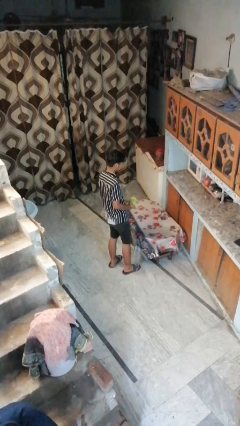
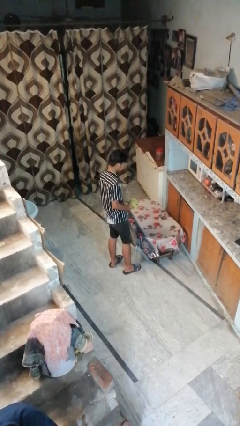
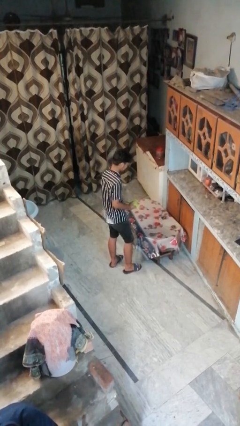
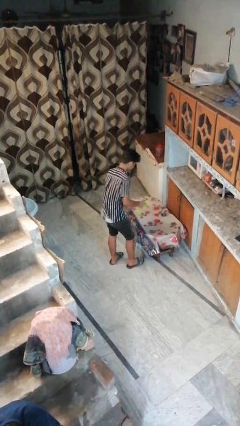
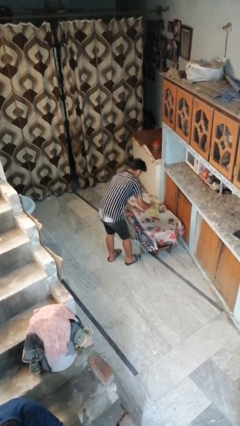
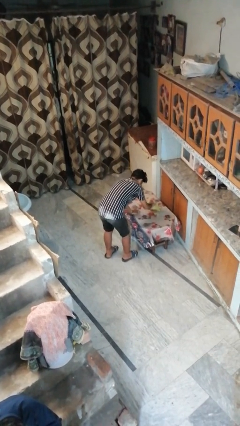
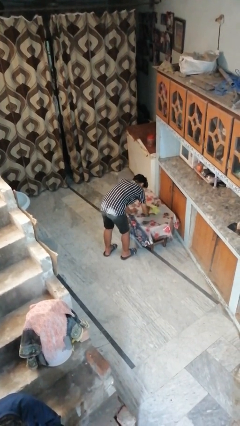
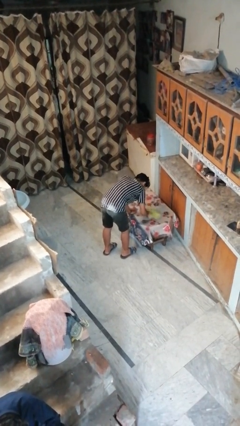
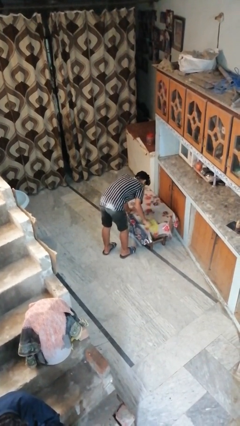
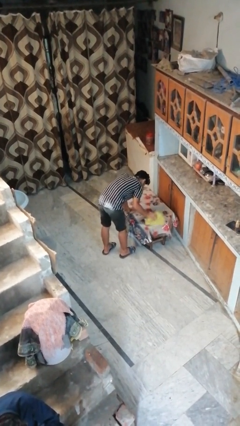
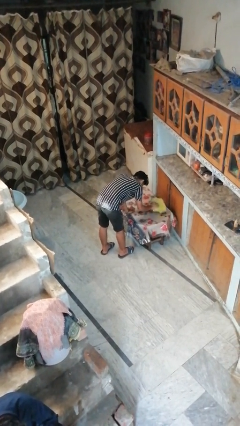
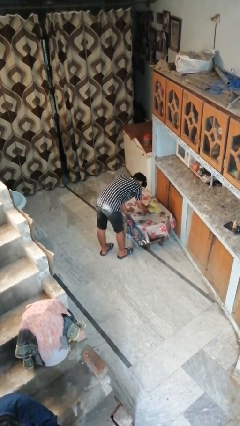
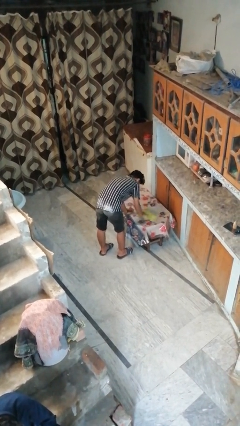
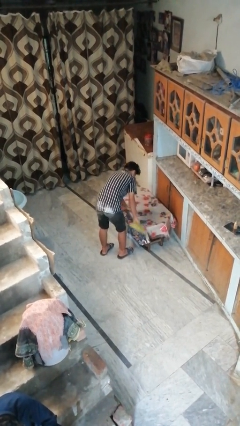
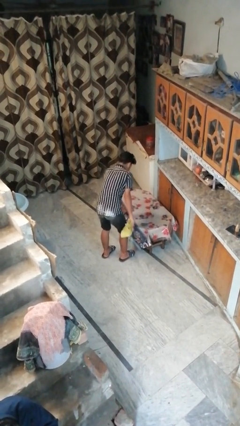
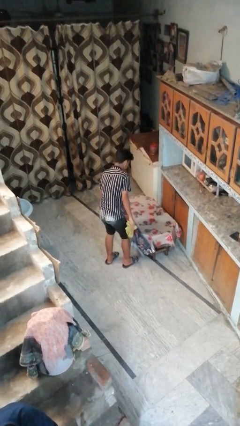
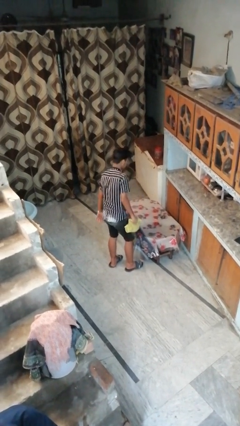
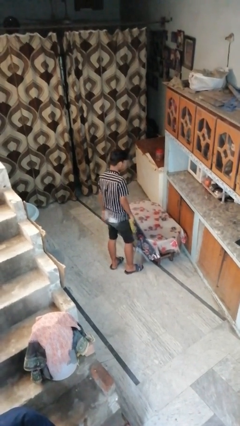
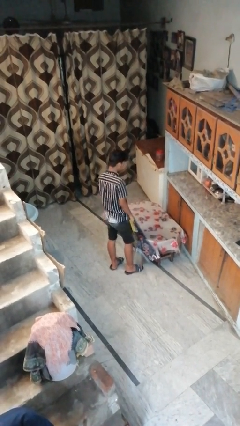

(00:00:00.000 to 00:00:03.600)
person cleans table with rag

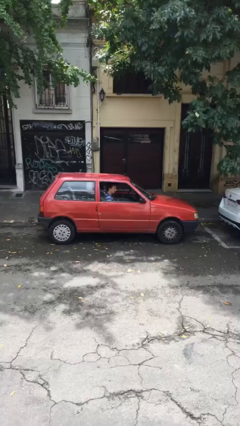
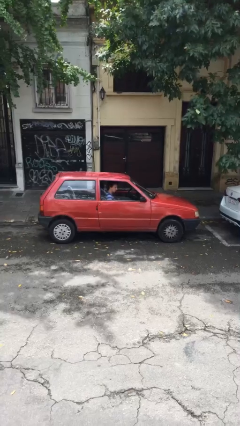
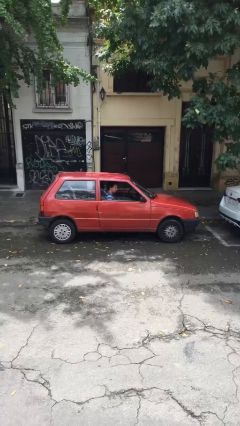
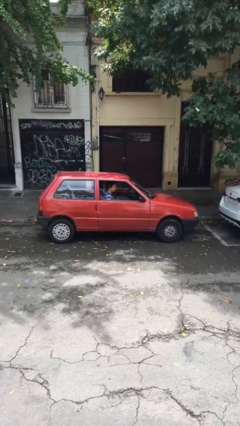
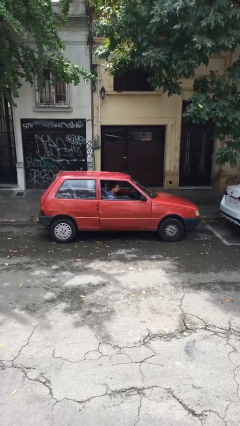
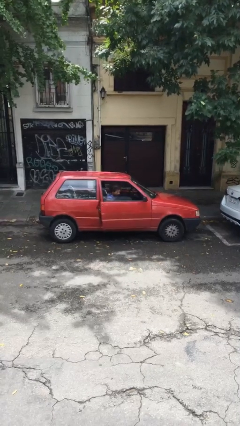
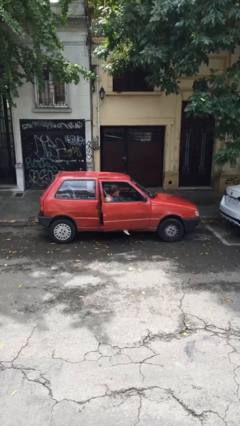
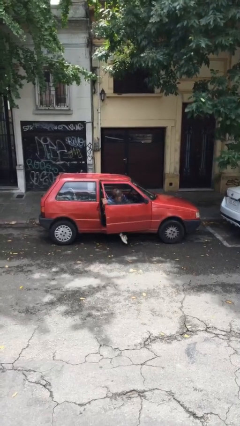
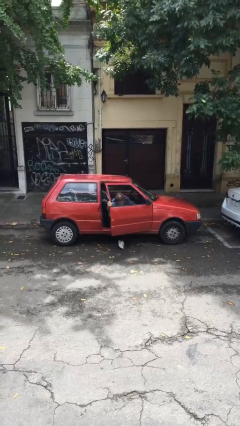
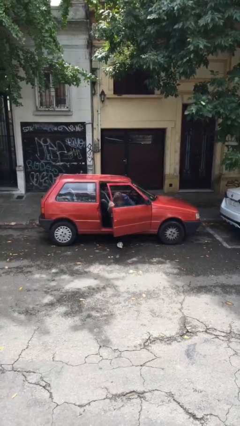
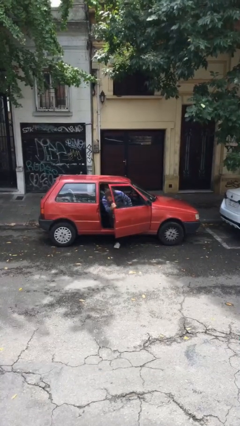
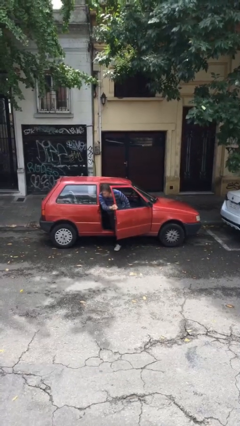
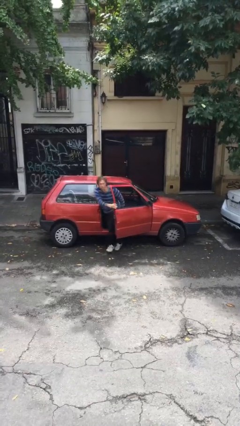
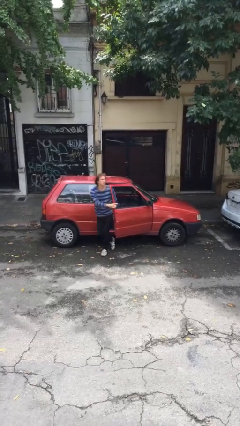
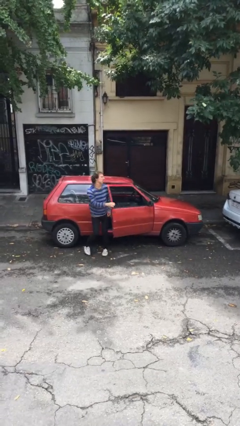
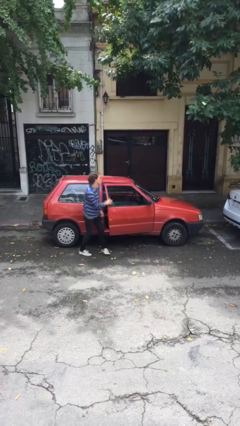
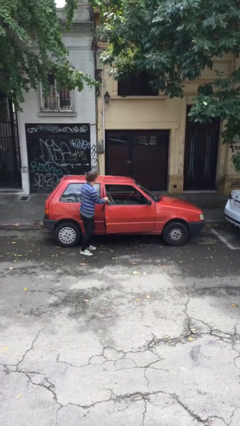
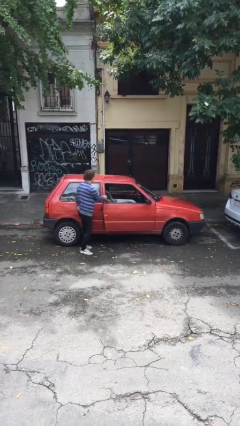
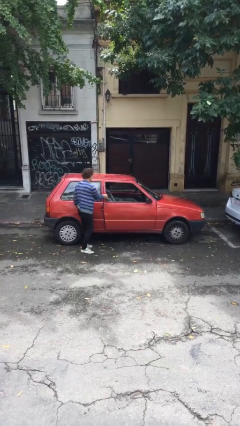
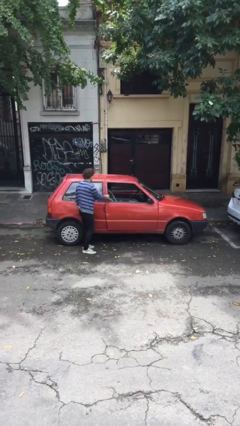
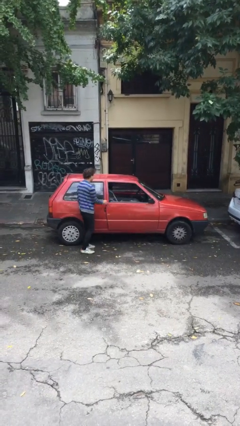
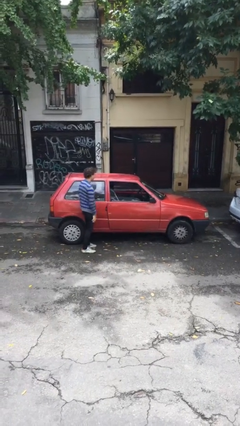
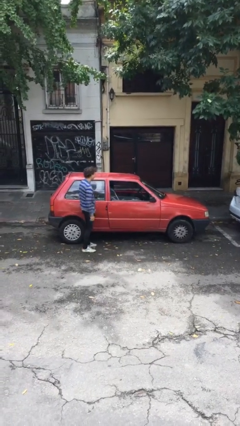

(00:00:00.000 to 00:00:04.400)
car drops off person

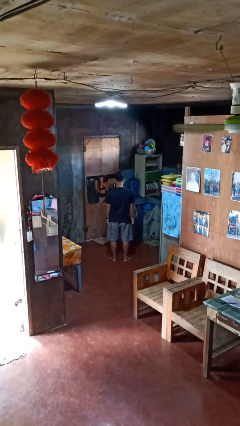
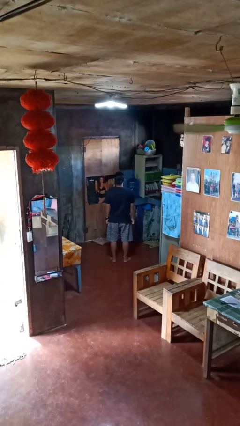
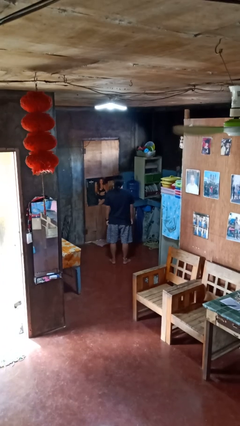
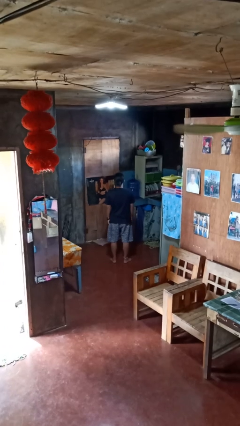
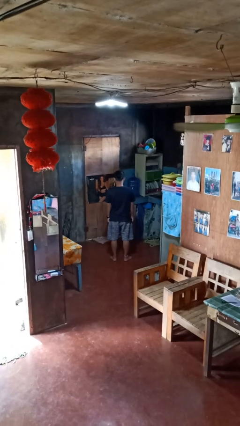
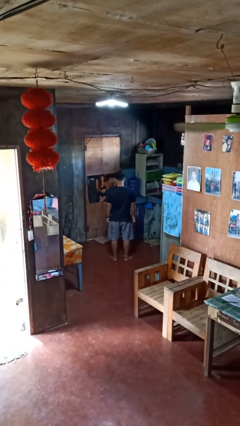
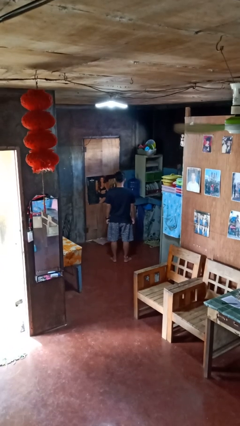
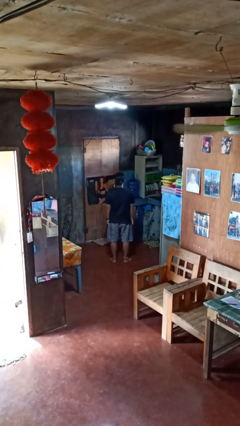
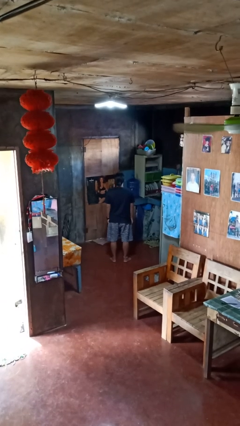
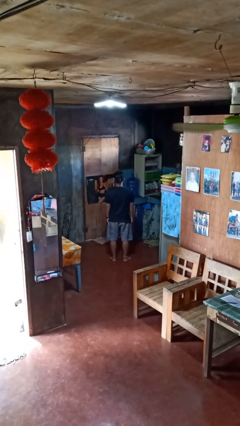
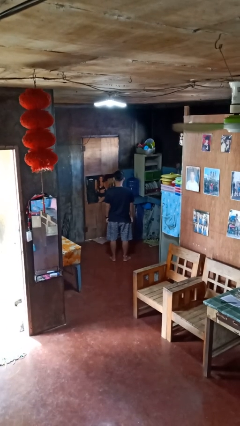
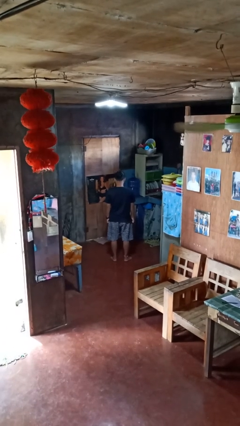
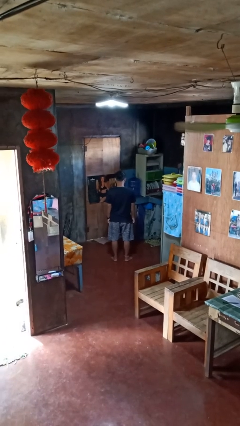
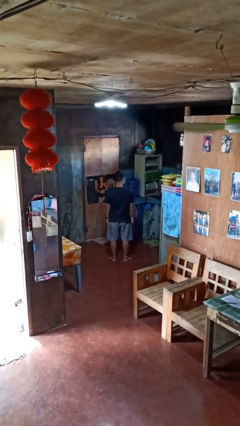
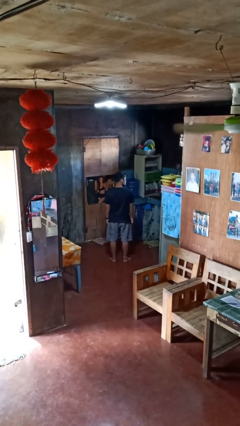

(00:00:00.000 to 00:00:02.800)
person nods head

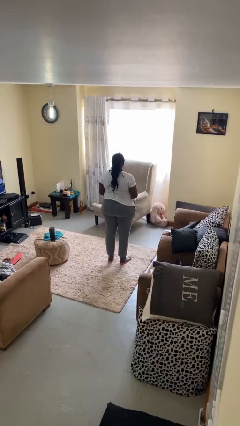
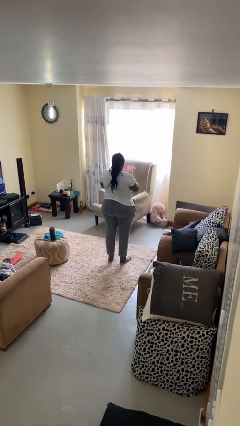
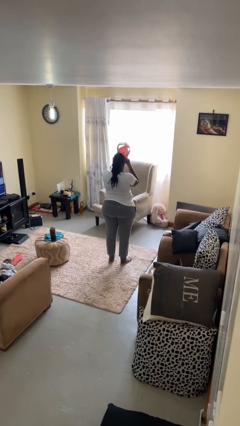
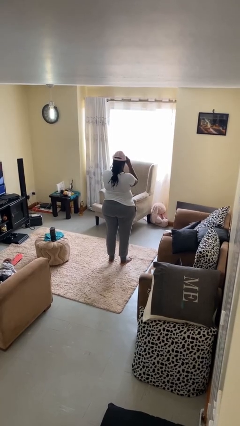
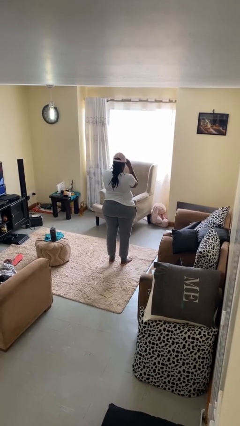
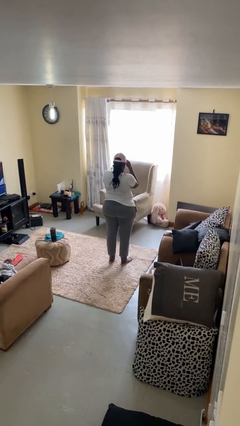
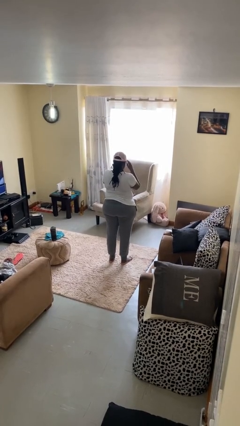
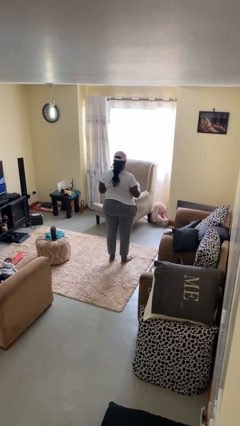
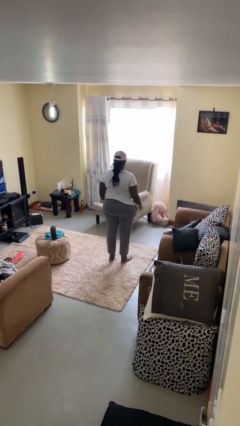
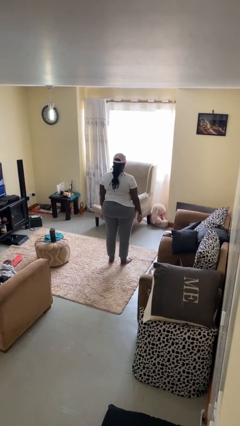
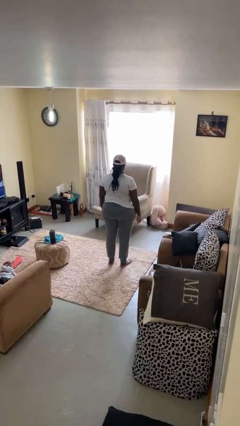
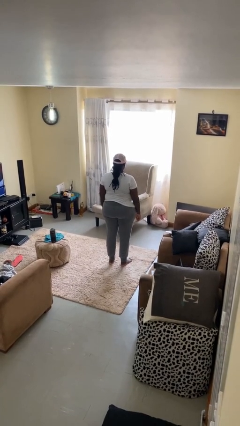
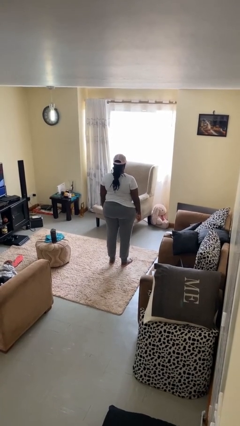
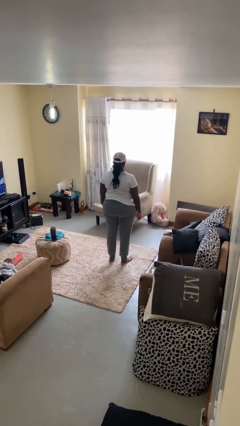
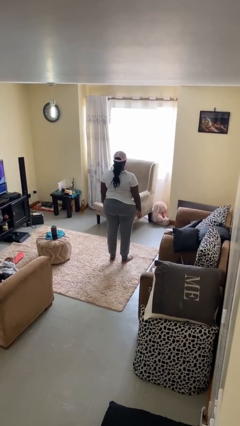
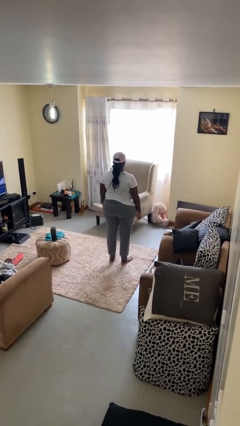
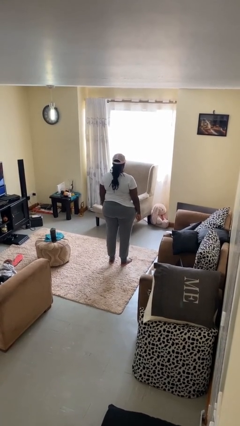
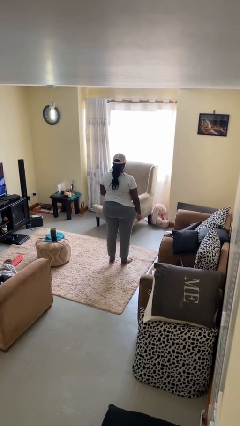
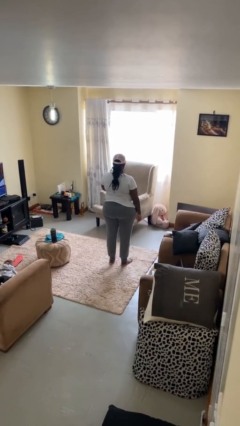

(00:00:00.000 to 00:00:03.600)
person puts on hat

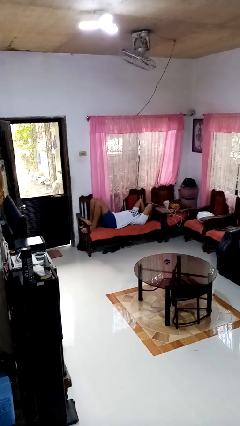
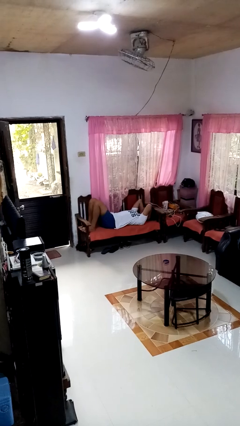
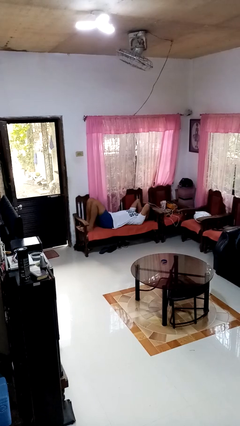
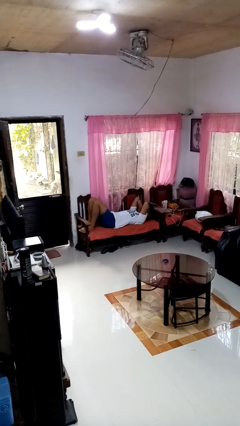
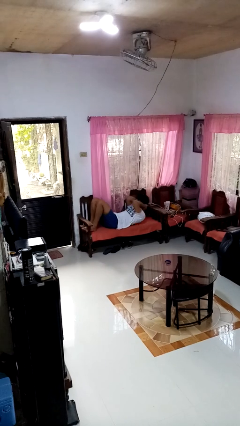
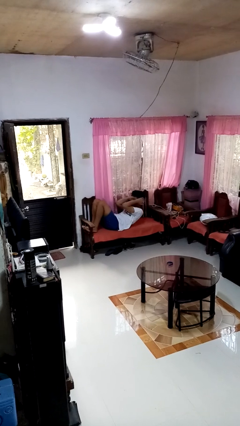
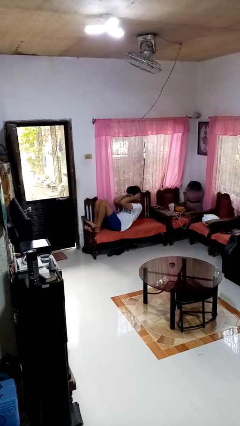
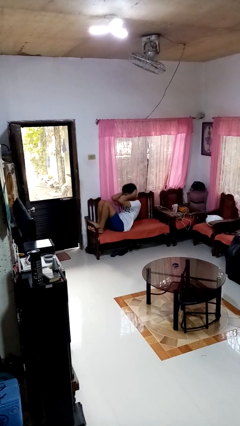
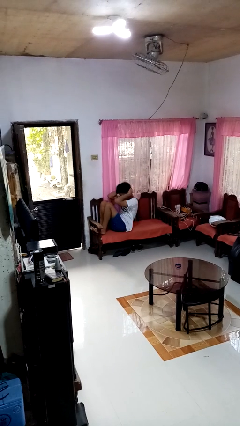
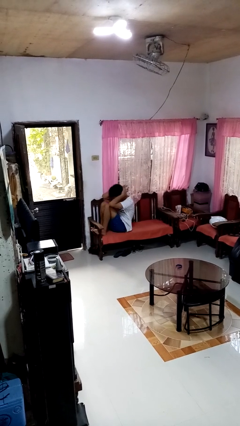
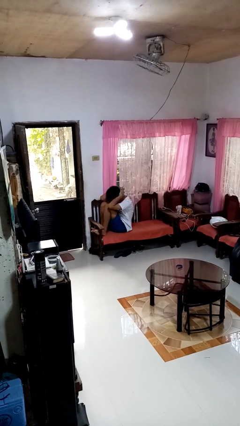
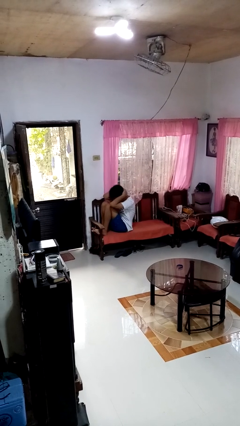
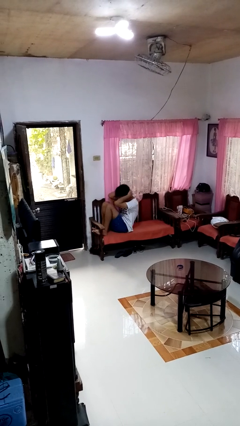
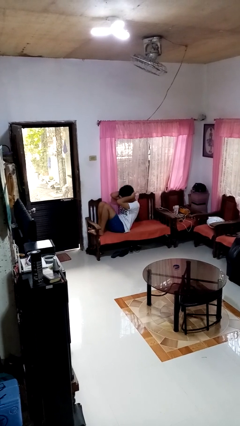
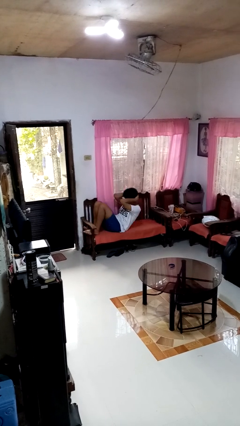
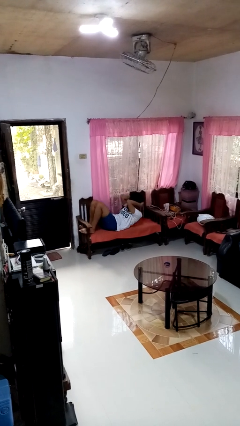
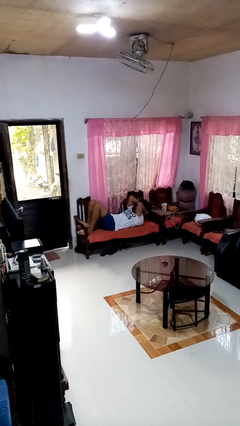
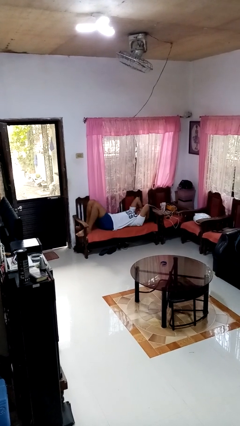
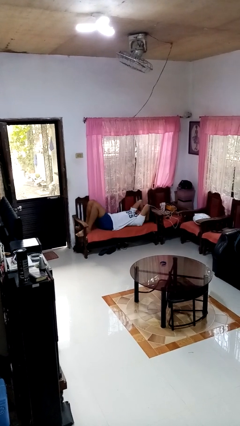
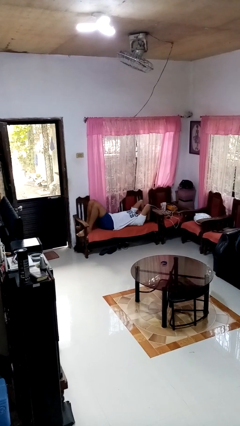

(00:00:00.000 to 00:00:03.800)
person exercises with situp
